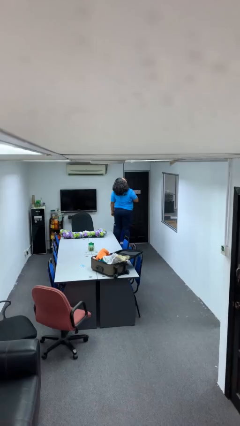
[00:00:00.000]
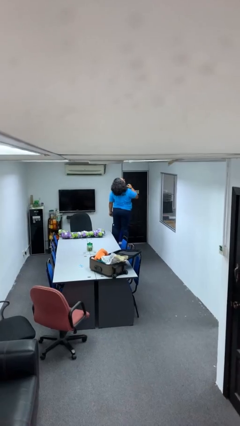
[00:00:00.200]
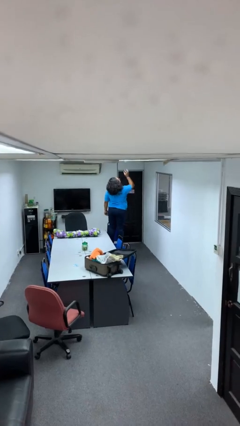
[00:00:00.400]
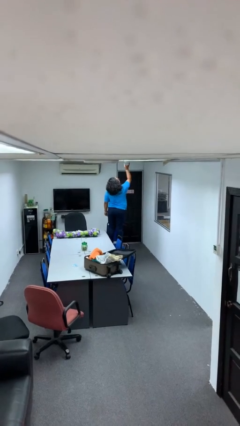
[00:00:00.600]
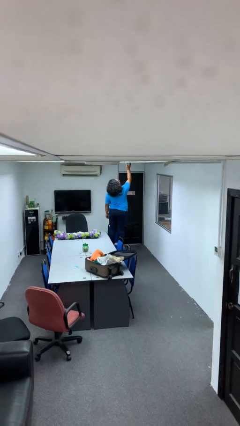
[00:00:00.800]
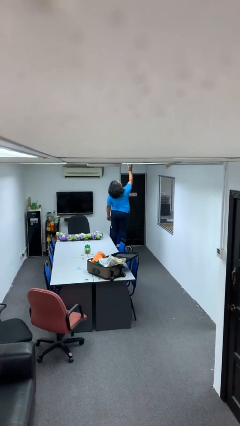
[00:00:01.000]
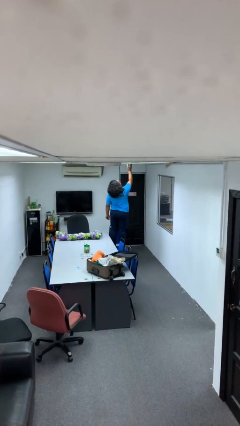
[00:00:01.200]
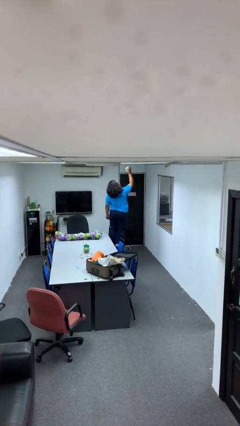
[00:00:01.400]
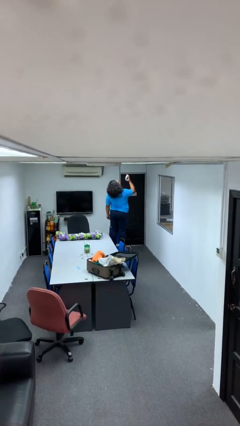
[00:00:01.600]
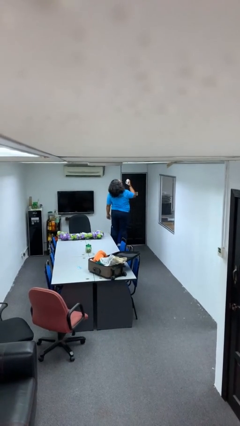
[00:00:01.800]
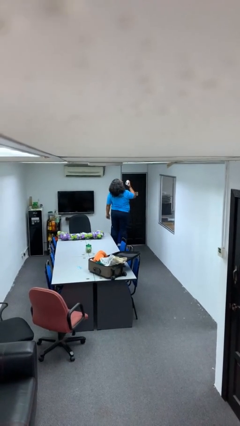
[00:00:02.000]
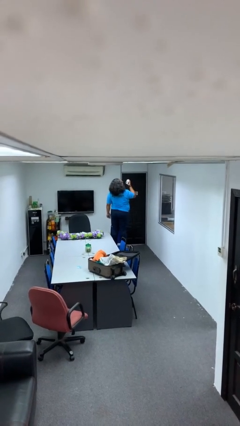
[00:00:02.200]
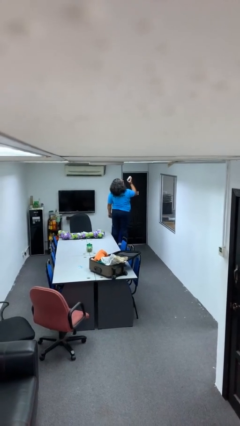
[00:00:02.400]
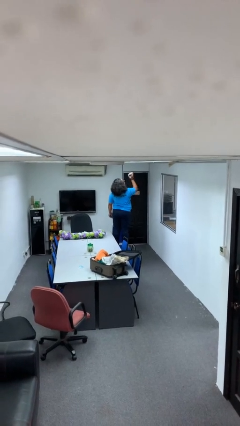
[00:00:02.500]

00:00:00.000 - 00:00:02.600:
person takes down smoke detector

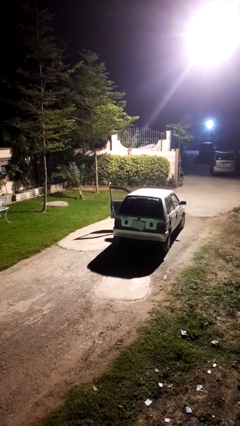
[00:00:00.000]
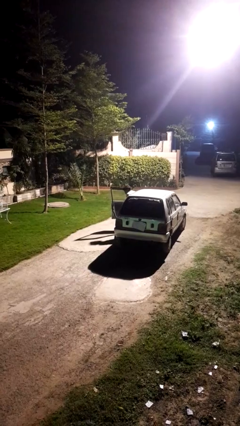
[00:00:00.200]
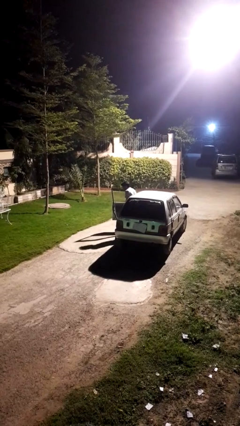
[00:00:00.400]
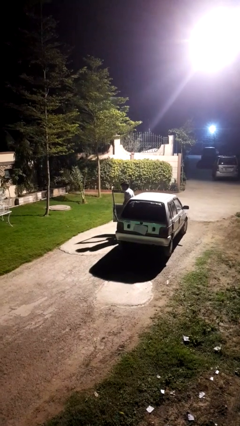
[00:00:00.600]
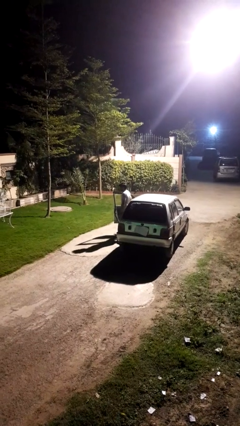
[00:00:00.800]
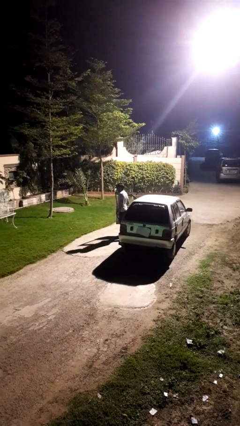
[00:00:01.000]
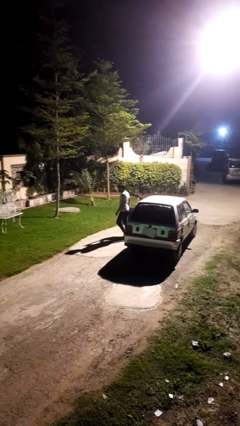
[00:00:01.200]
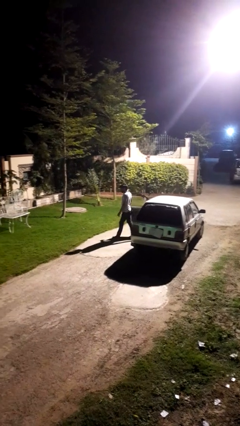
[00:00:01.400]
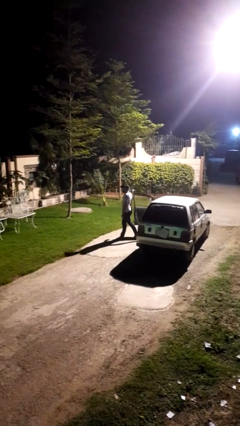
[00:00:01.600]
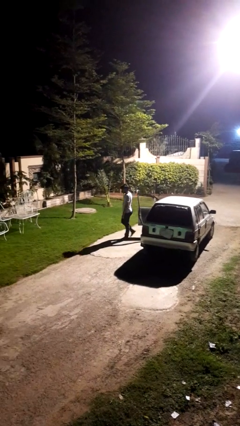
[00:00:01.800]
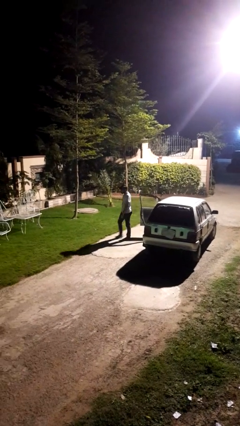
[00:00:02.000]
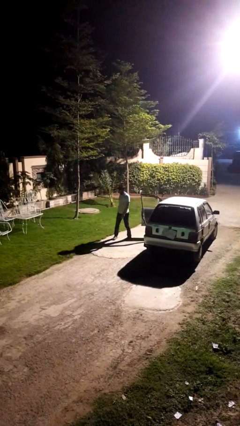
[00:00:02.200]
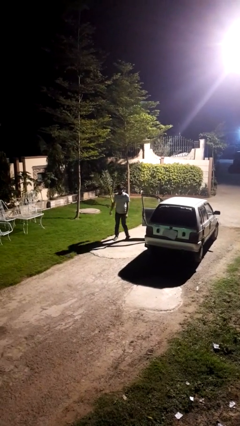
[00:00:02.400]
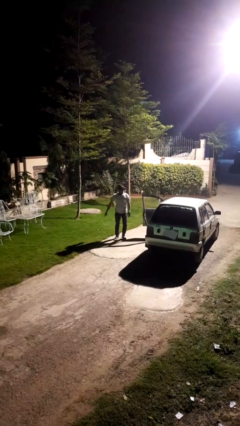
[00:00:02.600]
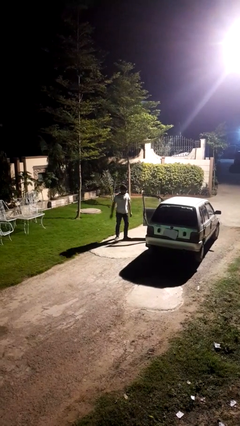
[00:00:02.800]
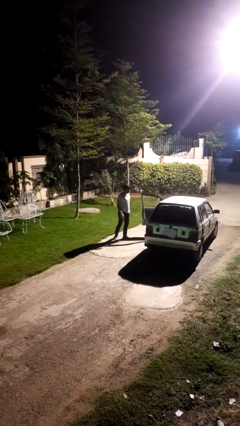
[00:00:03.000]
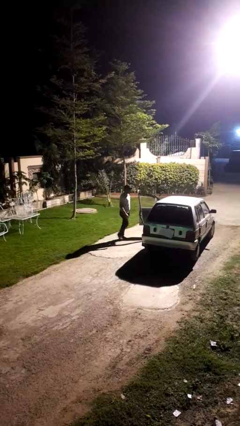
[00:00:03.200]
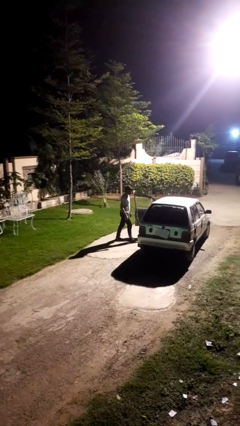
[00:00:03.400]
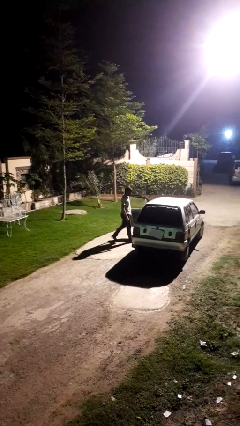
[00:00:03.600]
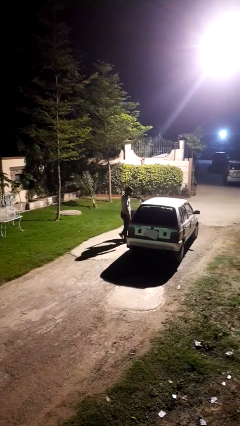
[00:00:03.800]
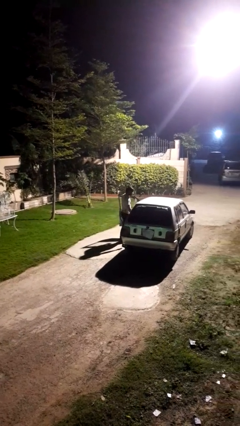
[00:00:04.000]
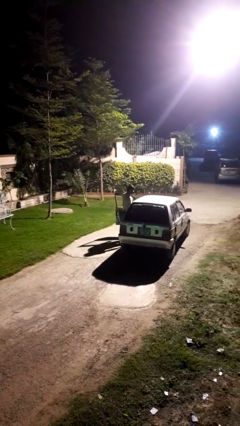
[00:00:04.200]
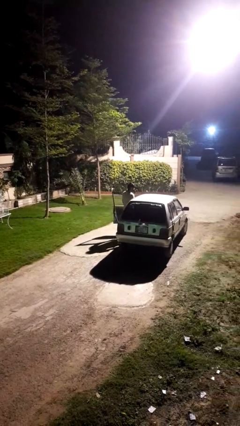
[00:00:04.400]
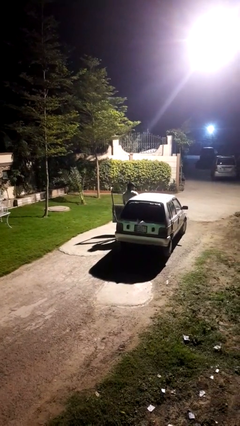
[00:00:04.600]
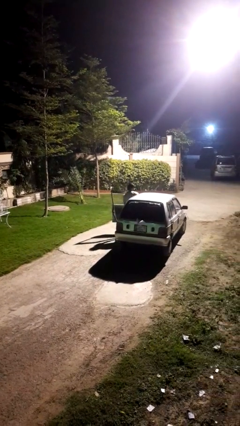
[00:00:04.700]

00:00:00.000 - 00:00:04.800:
person exits car

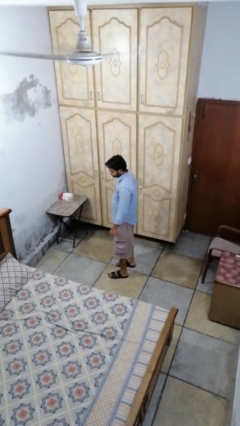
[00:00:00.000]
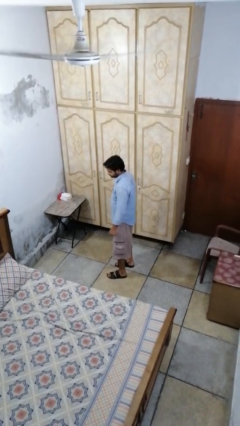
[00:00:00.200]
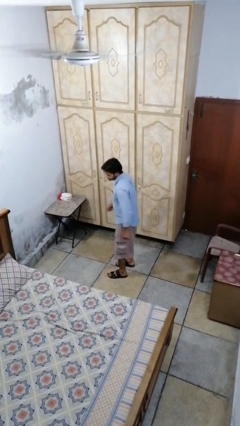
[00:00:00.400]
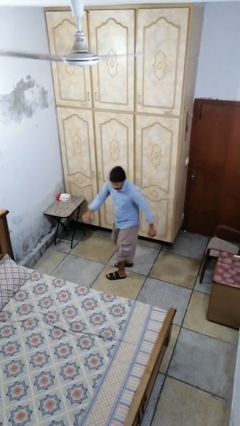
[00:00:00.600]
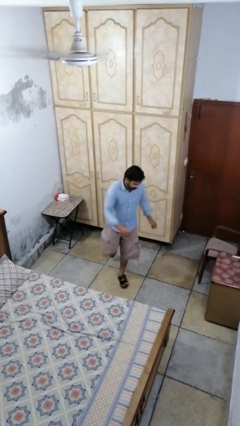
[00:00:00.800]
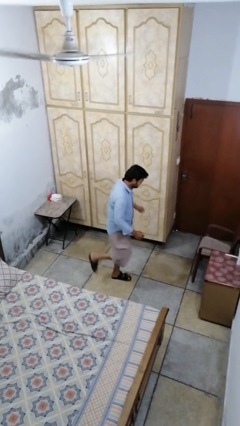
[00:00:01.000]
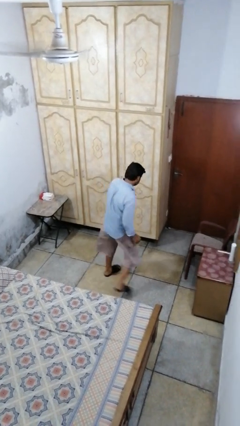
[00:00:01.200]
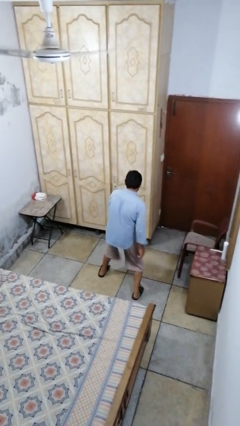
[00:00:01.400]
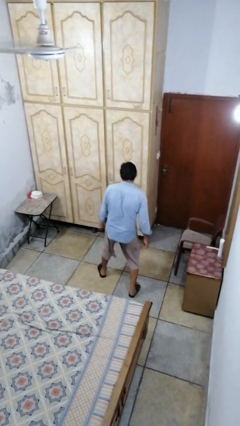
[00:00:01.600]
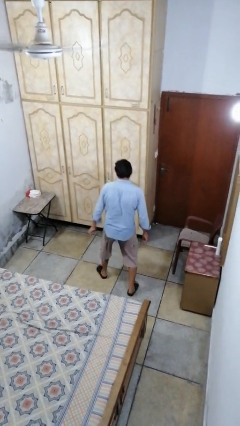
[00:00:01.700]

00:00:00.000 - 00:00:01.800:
person twirls

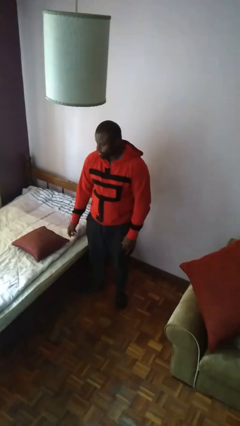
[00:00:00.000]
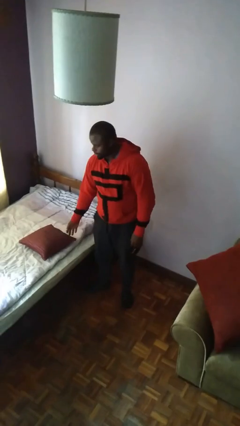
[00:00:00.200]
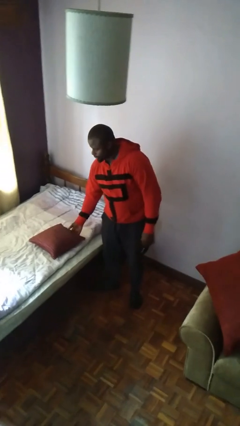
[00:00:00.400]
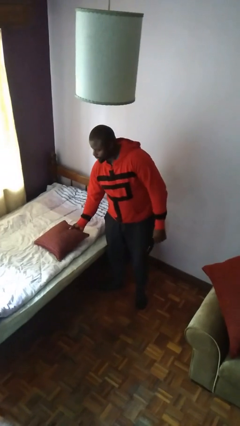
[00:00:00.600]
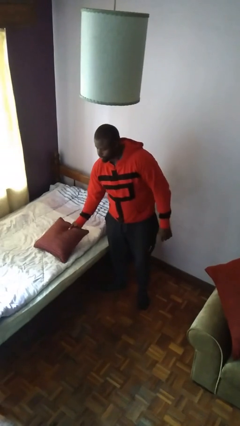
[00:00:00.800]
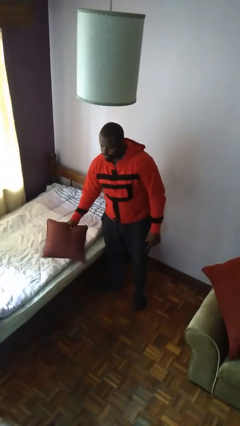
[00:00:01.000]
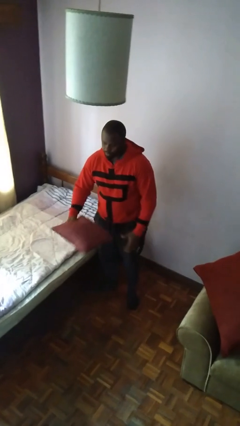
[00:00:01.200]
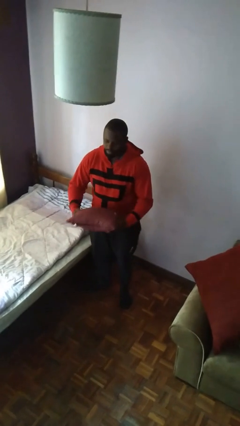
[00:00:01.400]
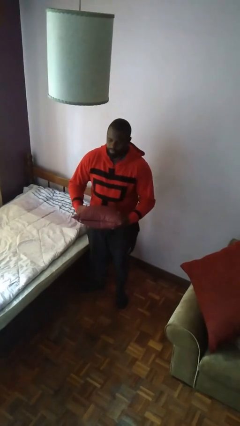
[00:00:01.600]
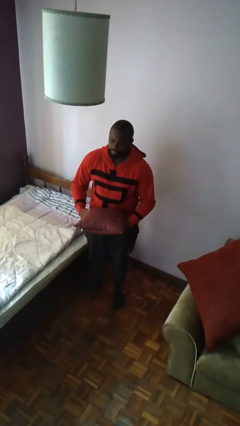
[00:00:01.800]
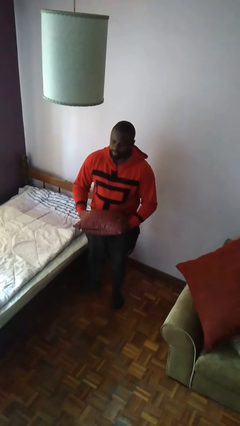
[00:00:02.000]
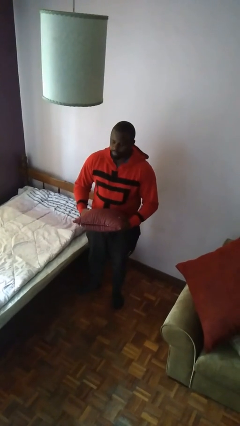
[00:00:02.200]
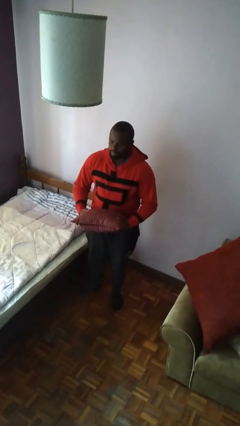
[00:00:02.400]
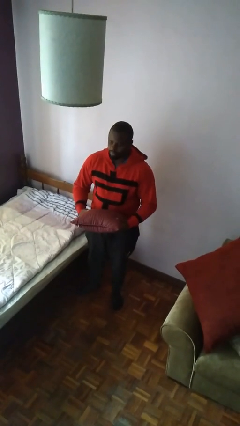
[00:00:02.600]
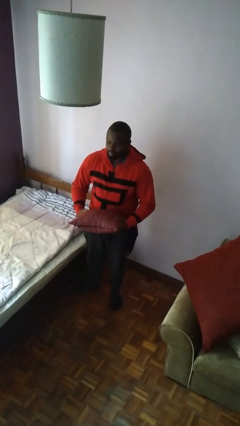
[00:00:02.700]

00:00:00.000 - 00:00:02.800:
person picks up object from bed

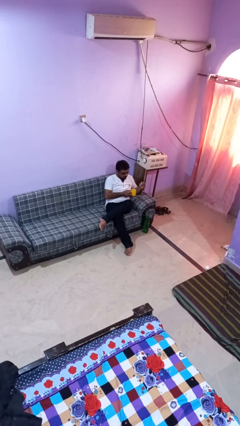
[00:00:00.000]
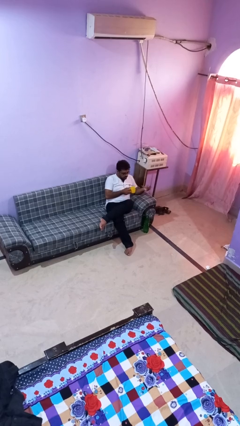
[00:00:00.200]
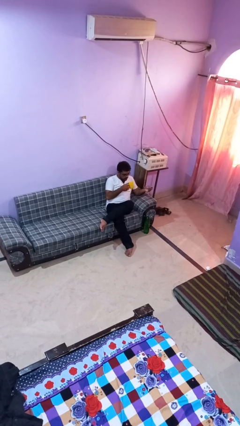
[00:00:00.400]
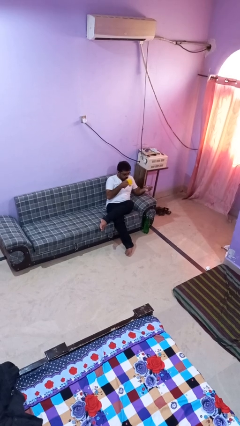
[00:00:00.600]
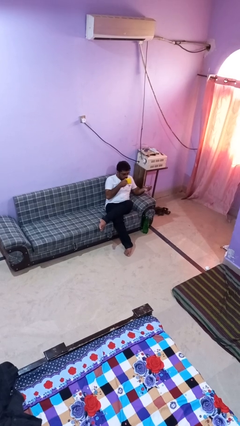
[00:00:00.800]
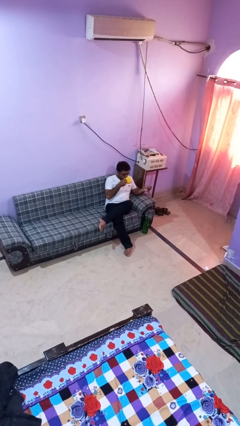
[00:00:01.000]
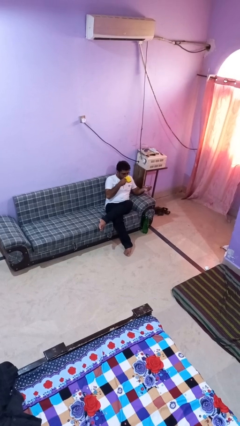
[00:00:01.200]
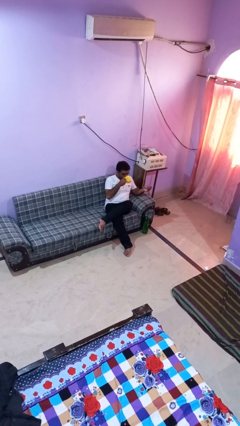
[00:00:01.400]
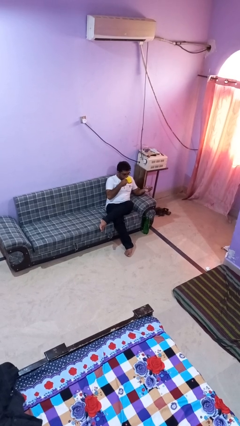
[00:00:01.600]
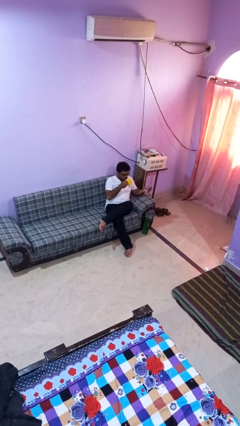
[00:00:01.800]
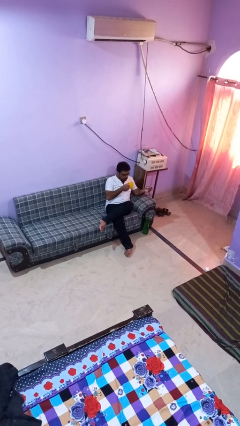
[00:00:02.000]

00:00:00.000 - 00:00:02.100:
person drinks from mug

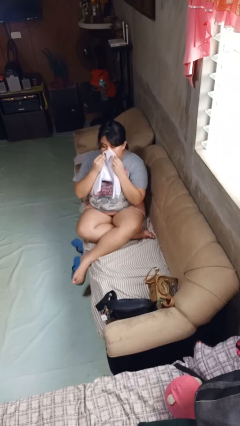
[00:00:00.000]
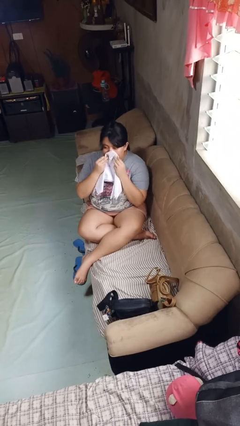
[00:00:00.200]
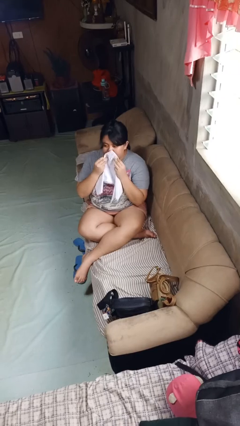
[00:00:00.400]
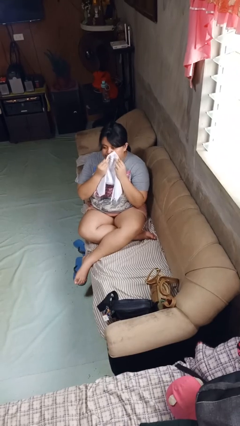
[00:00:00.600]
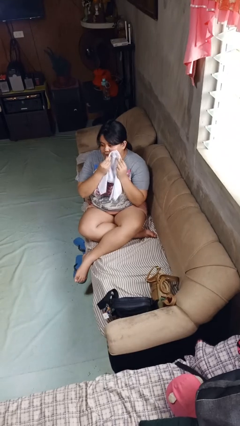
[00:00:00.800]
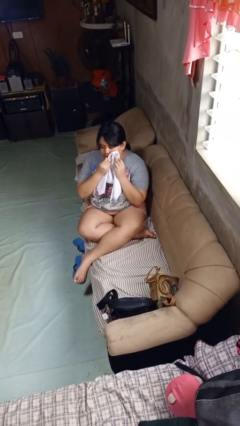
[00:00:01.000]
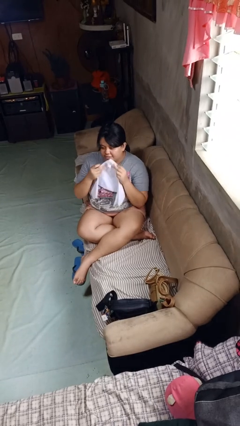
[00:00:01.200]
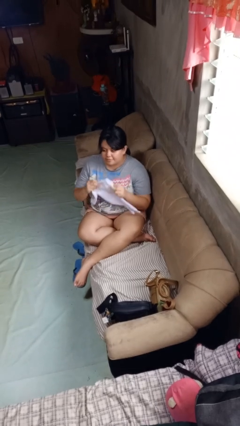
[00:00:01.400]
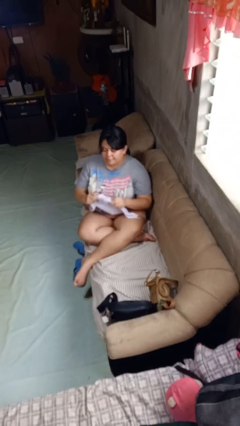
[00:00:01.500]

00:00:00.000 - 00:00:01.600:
person wipes mouth with napkin

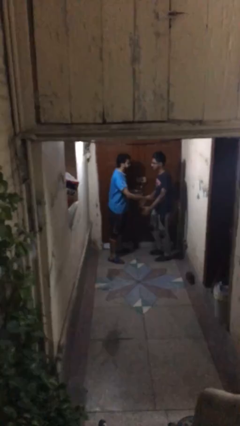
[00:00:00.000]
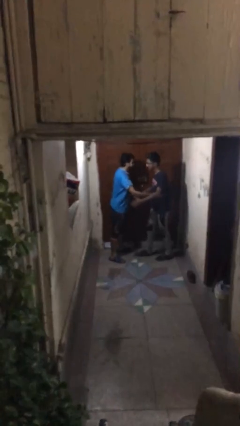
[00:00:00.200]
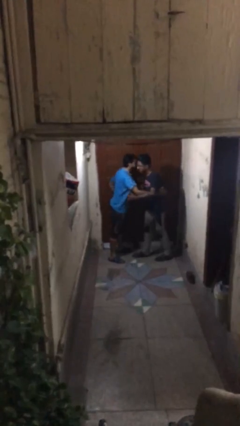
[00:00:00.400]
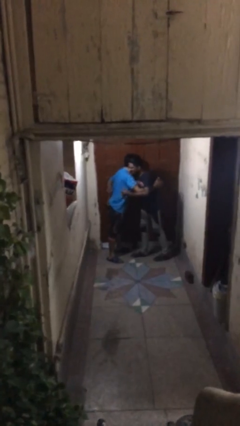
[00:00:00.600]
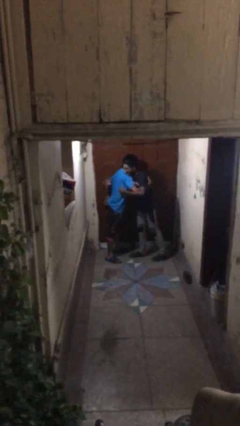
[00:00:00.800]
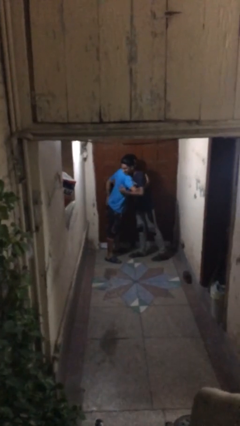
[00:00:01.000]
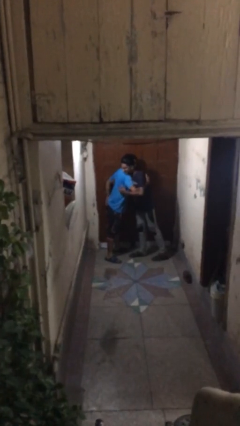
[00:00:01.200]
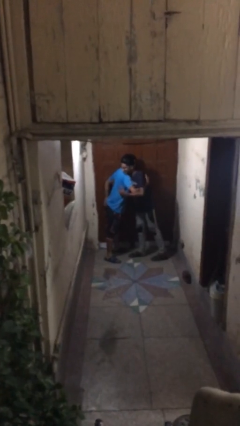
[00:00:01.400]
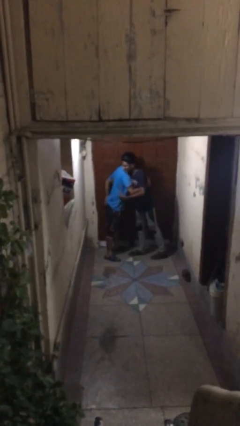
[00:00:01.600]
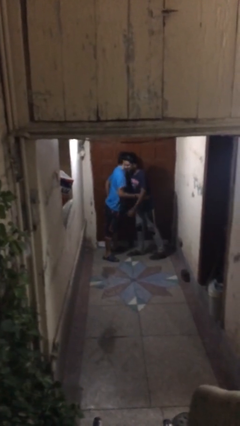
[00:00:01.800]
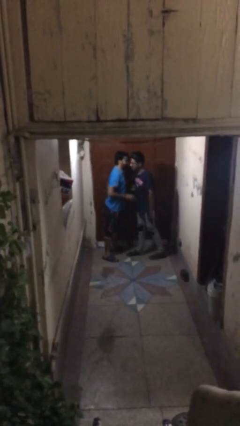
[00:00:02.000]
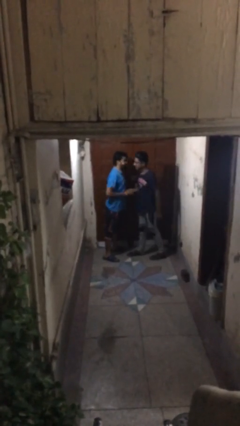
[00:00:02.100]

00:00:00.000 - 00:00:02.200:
person embraces person
